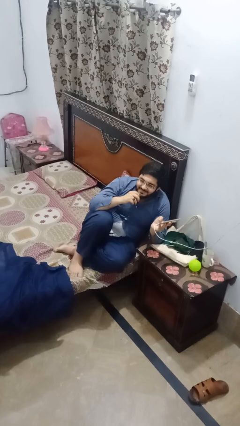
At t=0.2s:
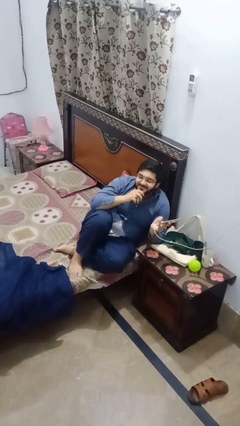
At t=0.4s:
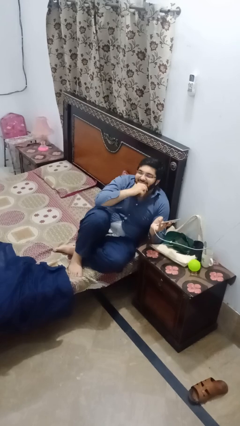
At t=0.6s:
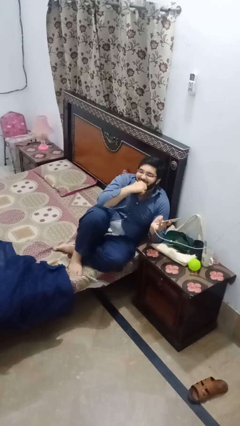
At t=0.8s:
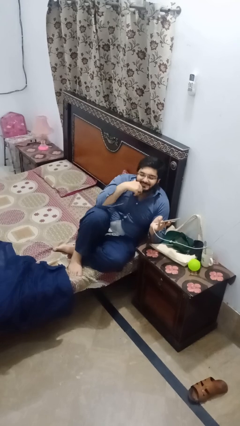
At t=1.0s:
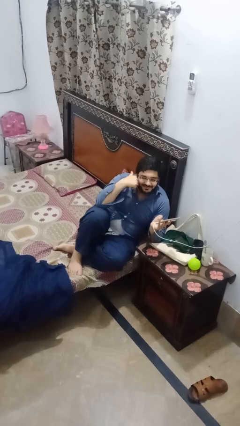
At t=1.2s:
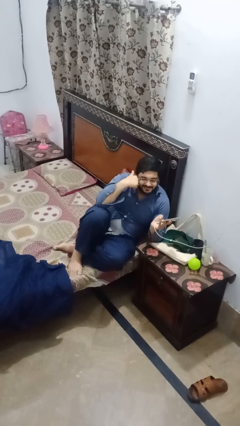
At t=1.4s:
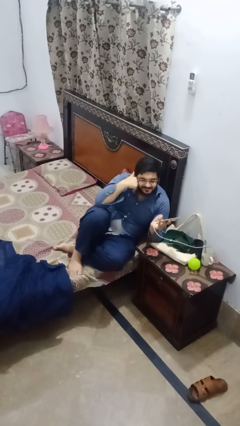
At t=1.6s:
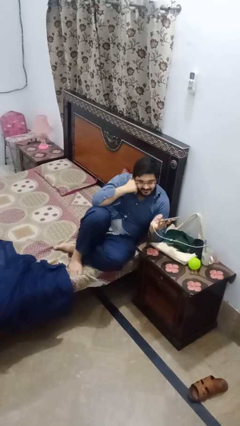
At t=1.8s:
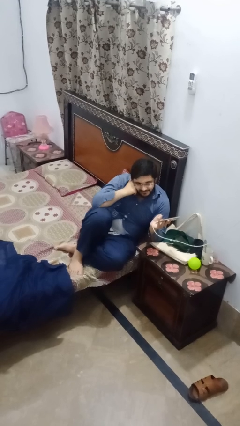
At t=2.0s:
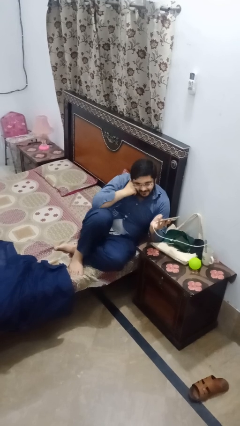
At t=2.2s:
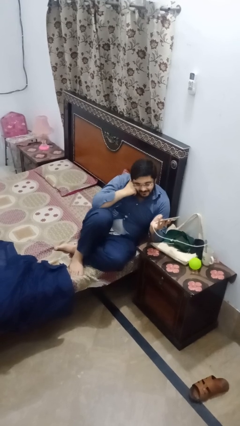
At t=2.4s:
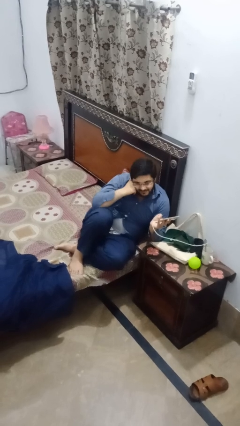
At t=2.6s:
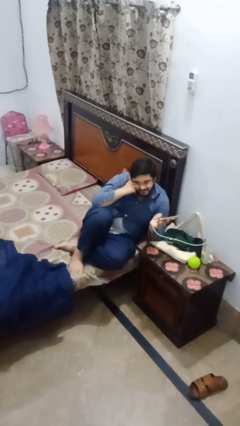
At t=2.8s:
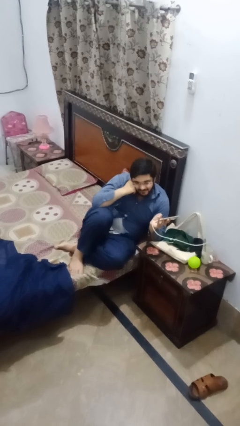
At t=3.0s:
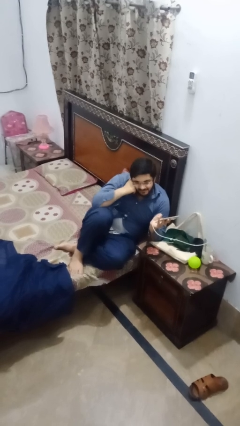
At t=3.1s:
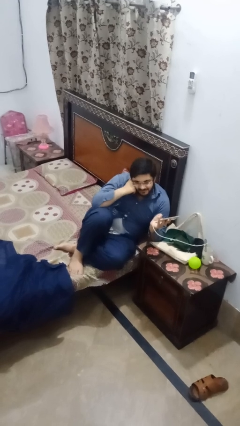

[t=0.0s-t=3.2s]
person strokes chin

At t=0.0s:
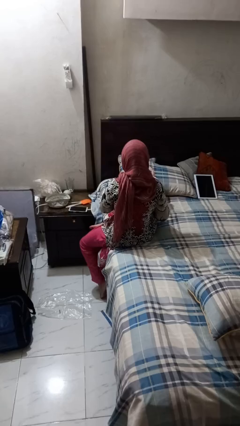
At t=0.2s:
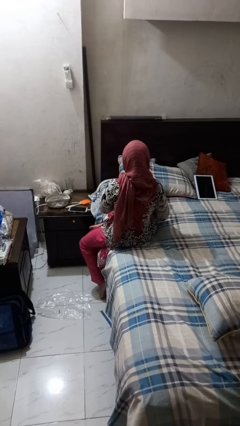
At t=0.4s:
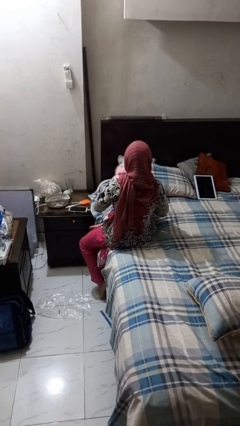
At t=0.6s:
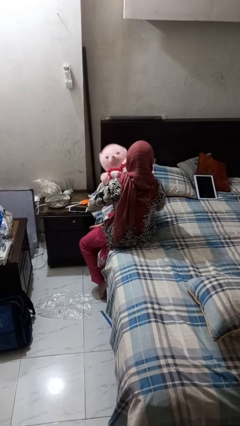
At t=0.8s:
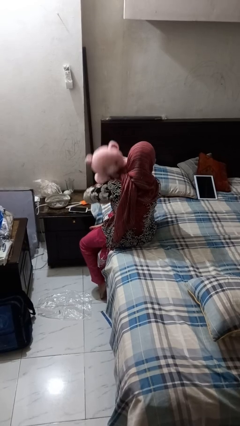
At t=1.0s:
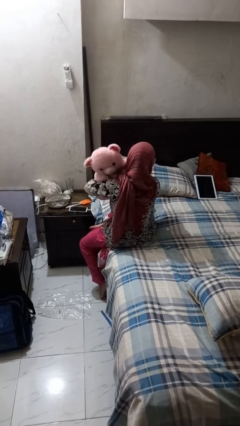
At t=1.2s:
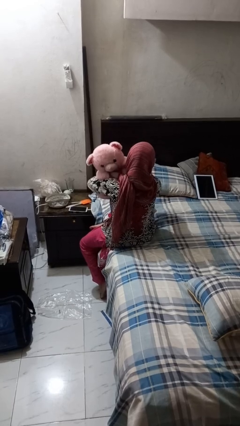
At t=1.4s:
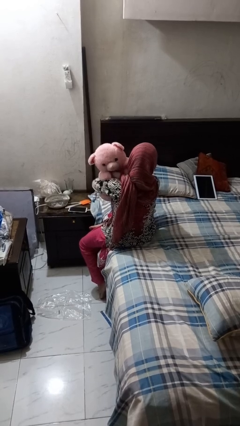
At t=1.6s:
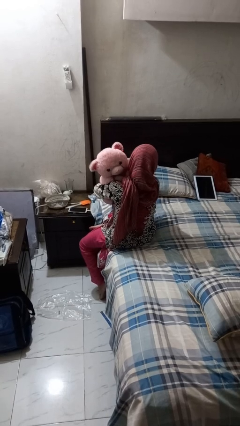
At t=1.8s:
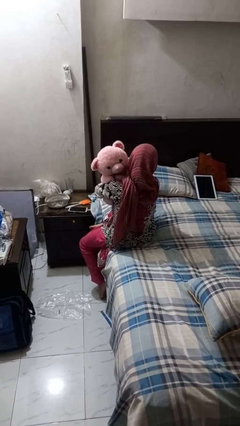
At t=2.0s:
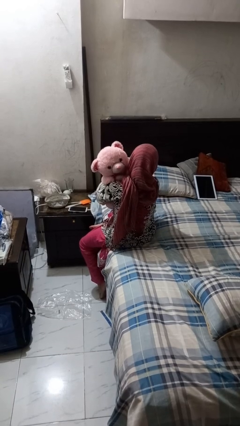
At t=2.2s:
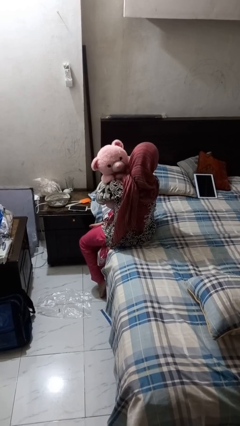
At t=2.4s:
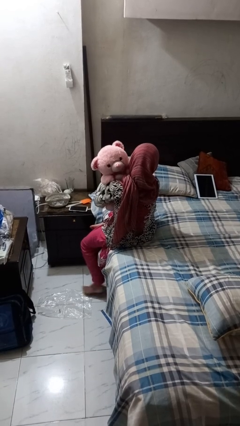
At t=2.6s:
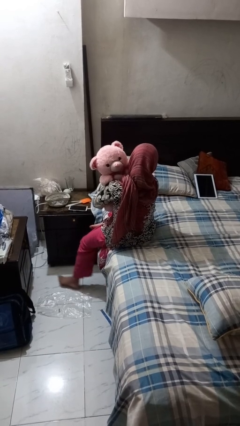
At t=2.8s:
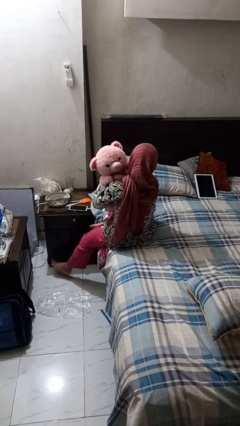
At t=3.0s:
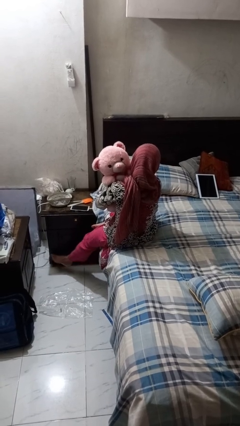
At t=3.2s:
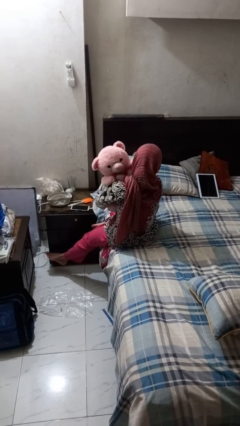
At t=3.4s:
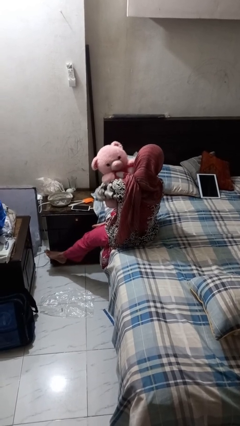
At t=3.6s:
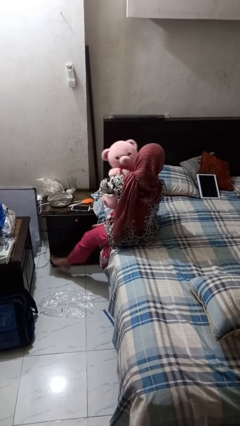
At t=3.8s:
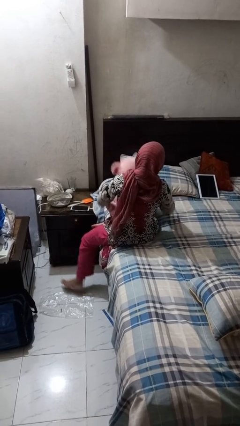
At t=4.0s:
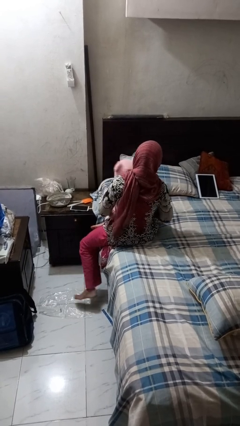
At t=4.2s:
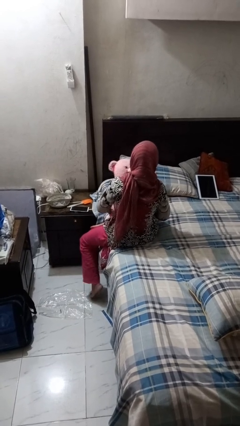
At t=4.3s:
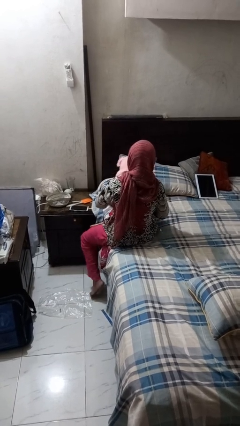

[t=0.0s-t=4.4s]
person hugs stuffed animal

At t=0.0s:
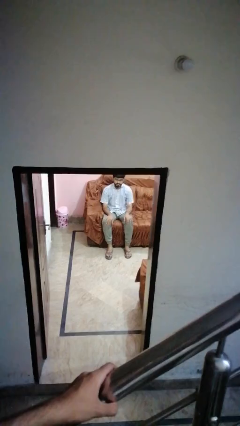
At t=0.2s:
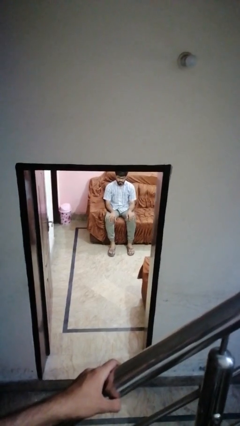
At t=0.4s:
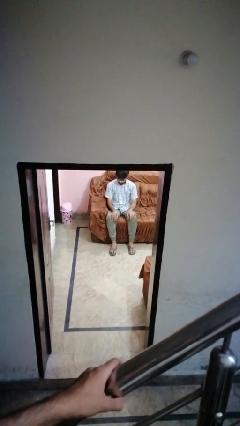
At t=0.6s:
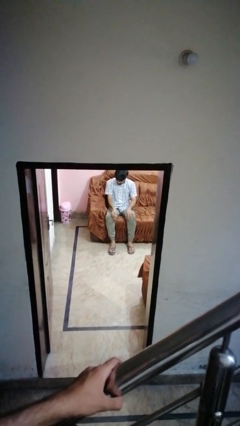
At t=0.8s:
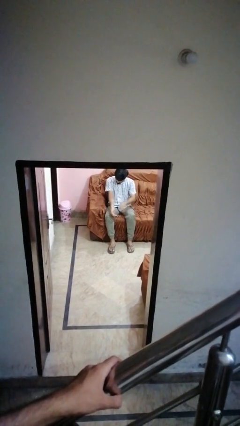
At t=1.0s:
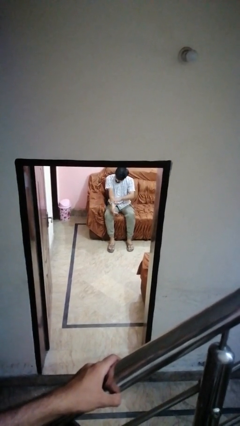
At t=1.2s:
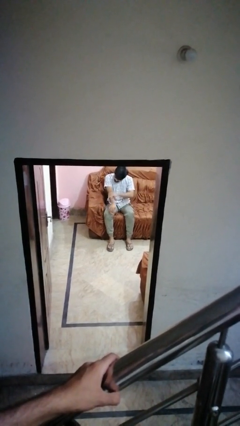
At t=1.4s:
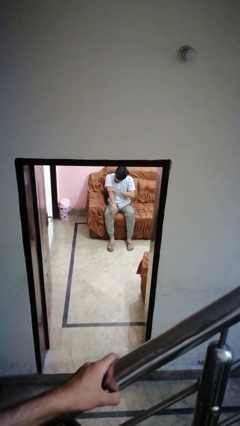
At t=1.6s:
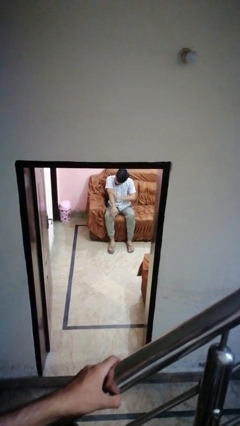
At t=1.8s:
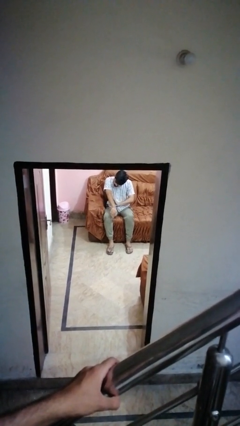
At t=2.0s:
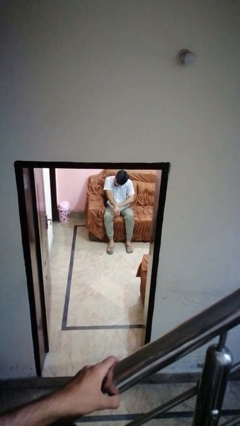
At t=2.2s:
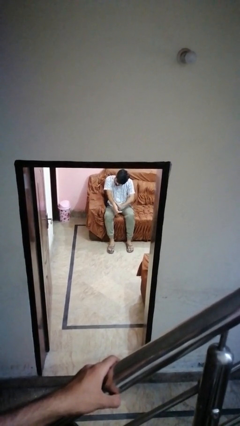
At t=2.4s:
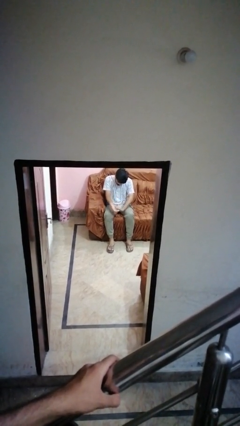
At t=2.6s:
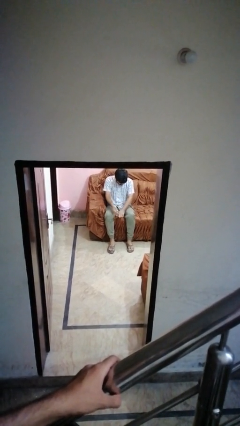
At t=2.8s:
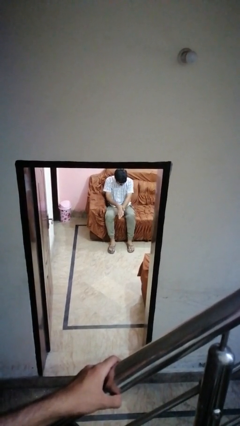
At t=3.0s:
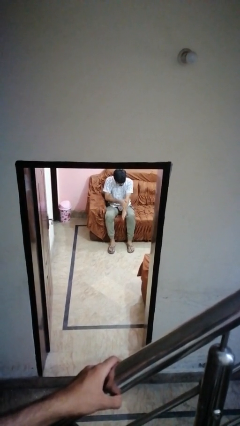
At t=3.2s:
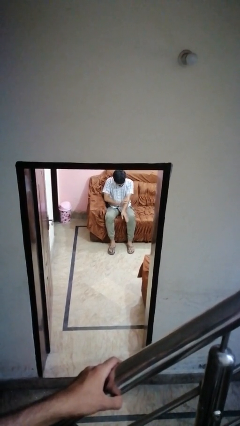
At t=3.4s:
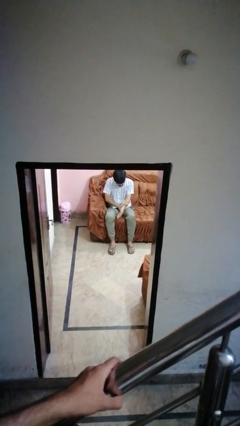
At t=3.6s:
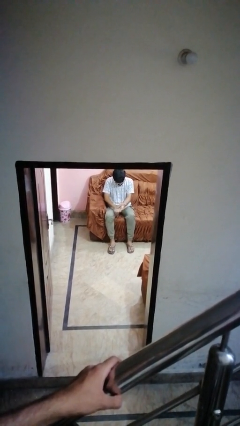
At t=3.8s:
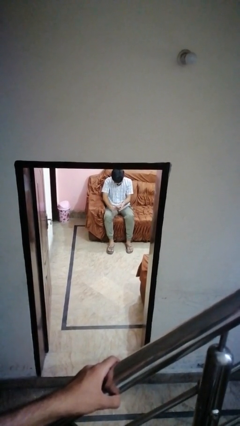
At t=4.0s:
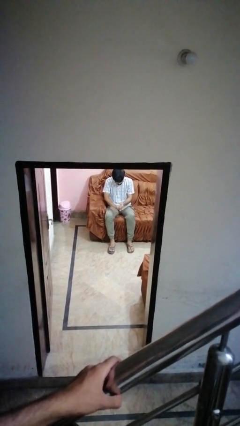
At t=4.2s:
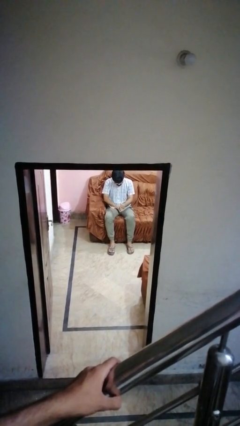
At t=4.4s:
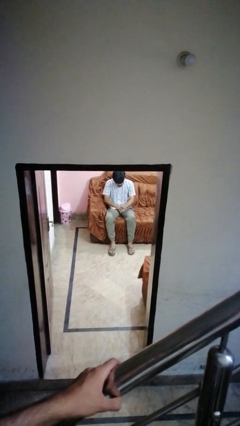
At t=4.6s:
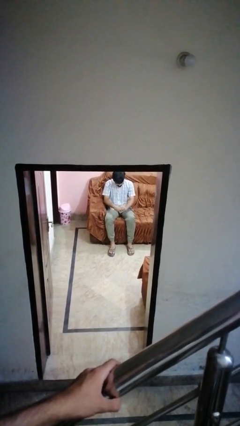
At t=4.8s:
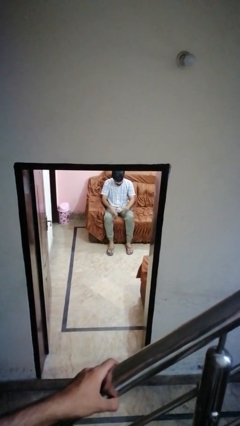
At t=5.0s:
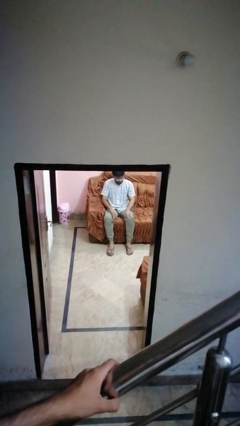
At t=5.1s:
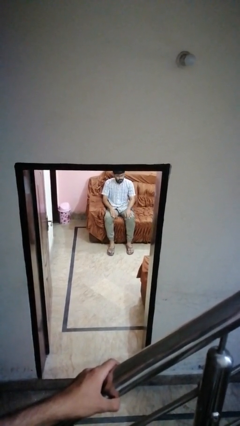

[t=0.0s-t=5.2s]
person looks at hands in lap

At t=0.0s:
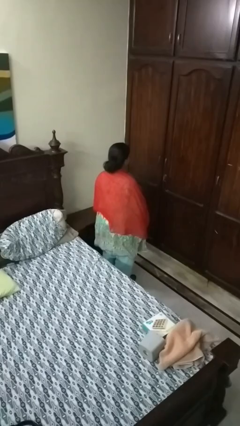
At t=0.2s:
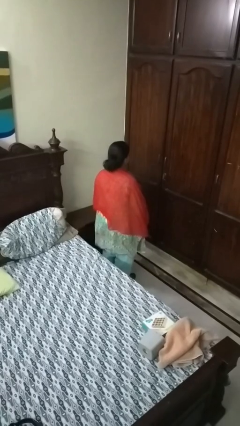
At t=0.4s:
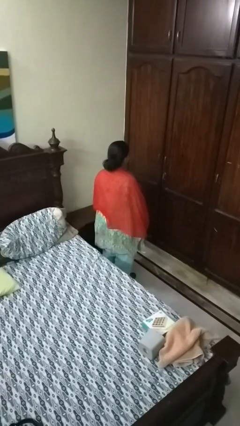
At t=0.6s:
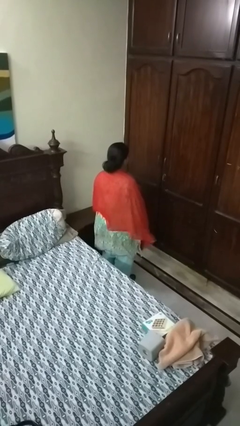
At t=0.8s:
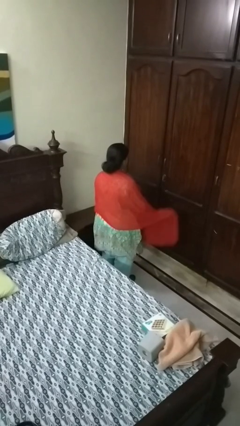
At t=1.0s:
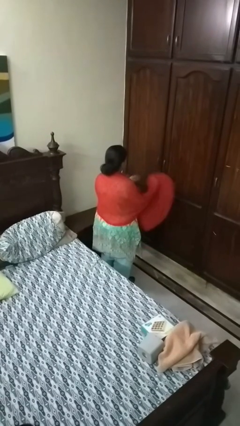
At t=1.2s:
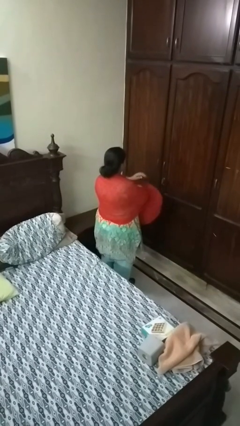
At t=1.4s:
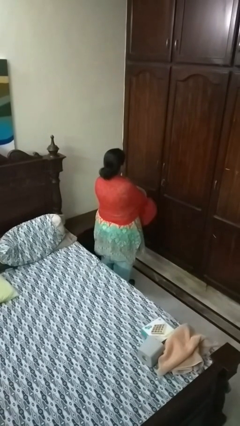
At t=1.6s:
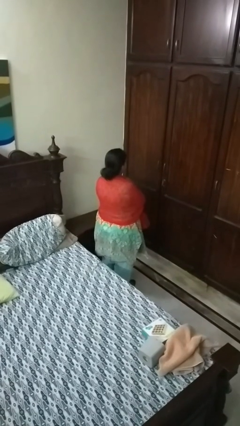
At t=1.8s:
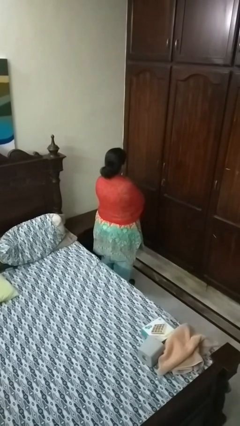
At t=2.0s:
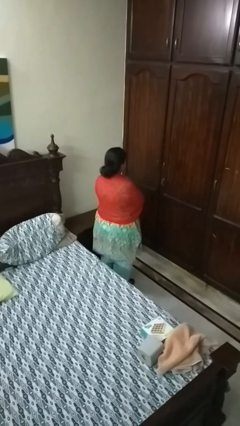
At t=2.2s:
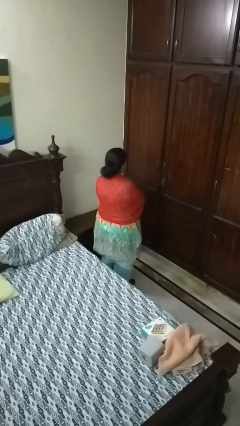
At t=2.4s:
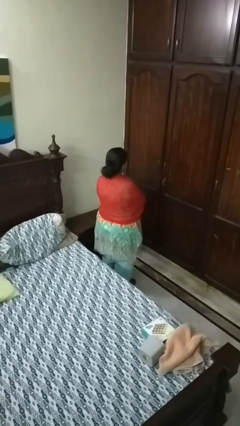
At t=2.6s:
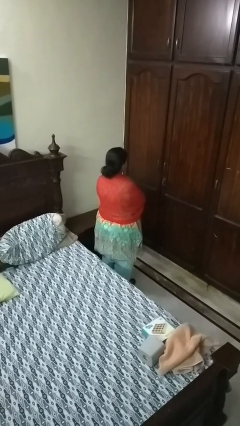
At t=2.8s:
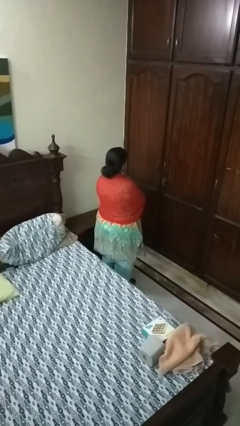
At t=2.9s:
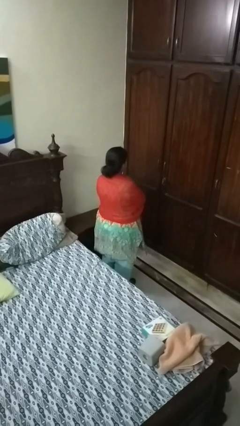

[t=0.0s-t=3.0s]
person crosses arms

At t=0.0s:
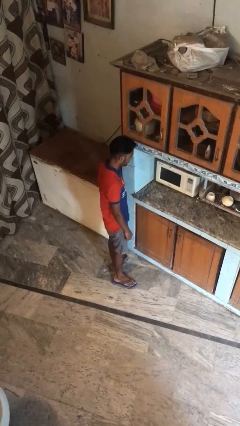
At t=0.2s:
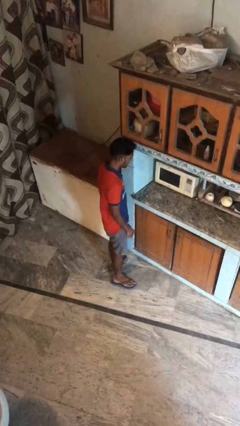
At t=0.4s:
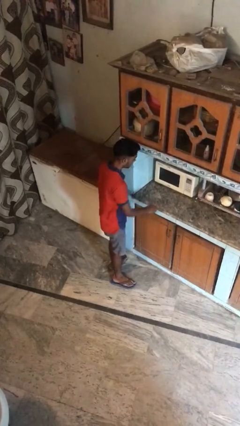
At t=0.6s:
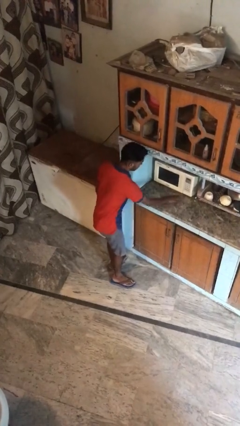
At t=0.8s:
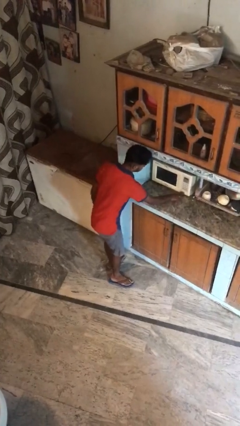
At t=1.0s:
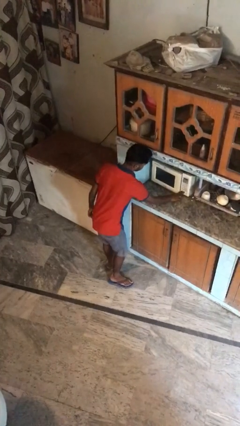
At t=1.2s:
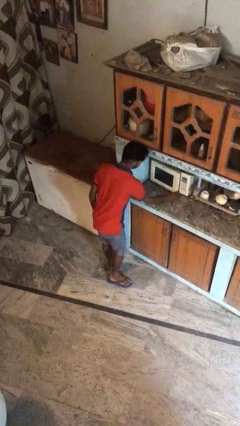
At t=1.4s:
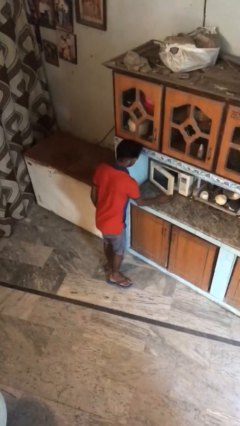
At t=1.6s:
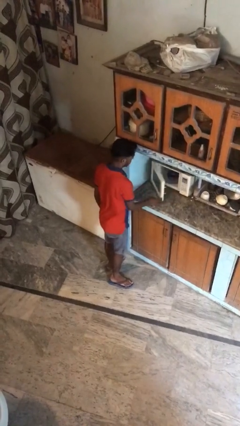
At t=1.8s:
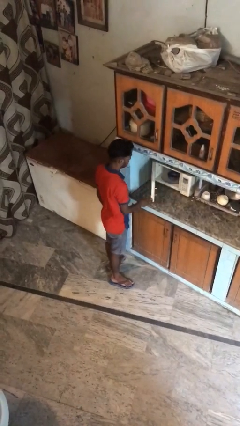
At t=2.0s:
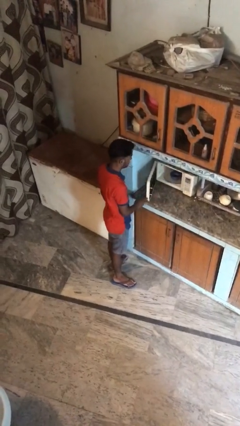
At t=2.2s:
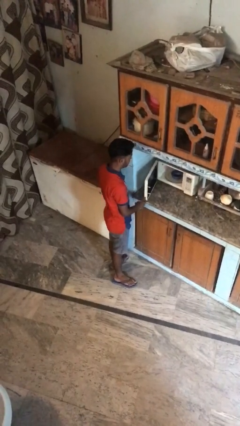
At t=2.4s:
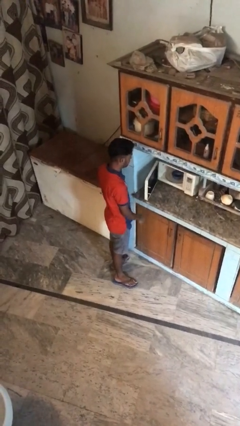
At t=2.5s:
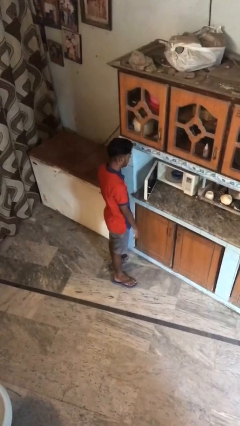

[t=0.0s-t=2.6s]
person opens oven door
